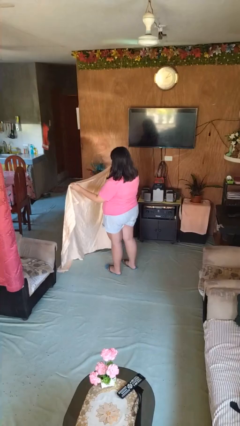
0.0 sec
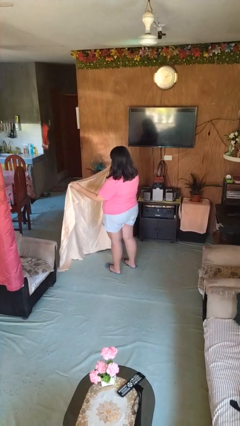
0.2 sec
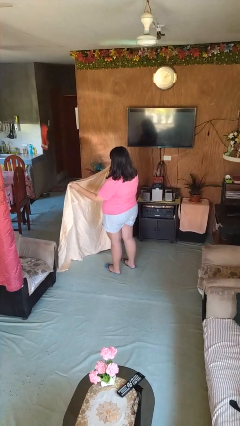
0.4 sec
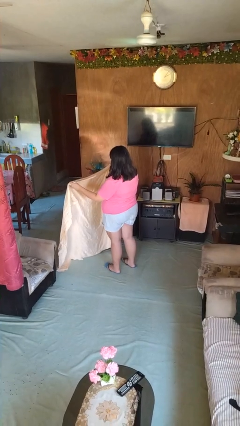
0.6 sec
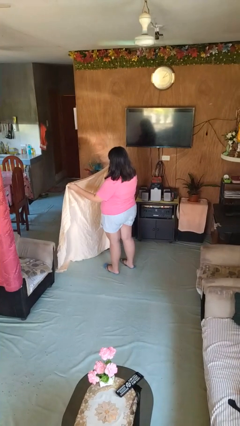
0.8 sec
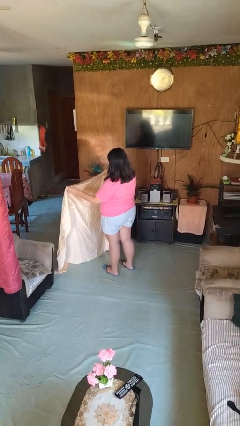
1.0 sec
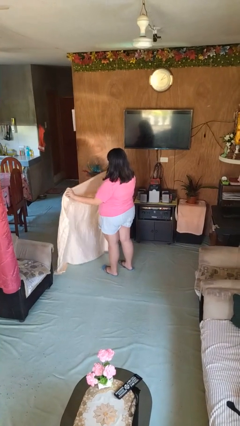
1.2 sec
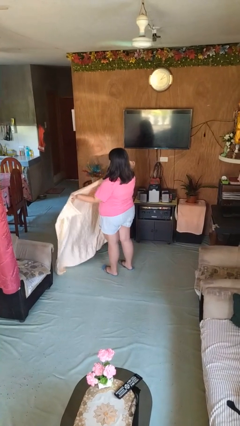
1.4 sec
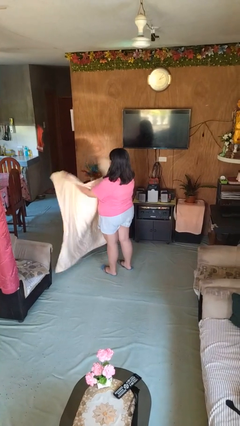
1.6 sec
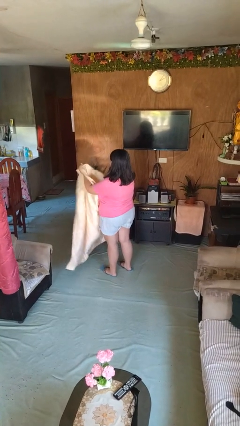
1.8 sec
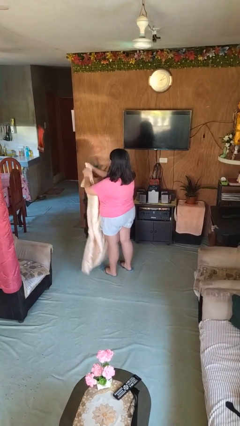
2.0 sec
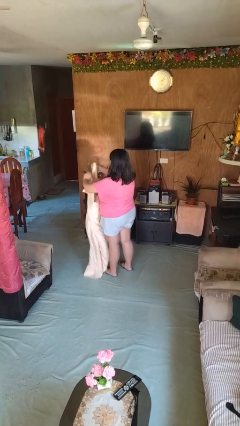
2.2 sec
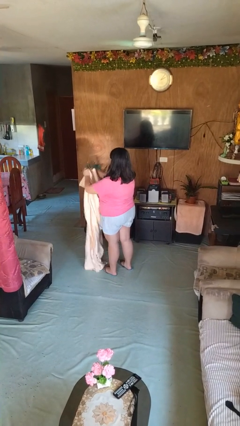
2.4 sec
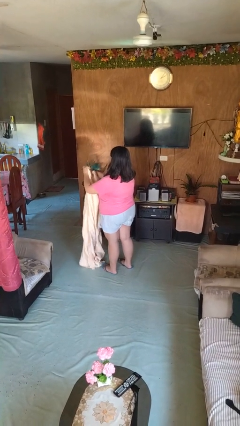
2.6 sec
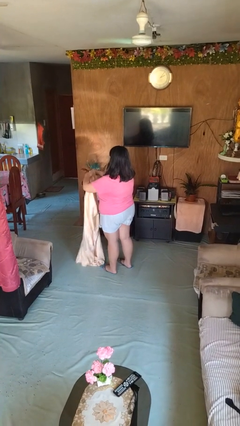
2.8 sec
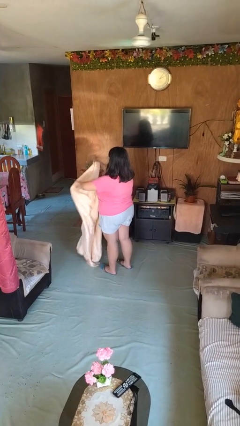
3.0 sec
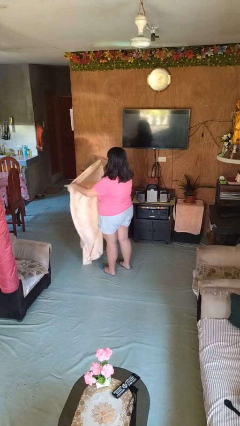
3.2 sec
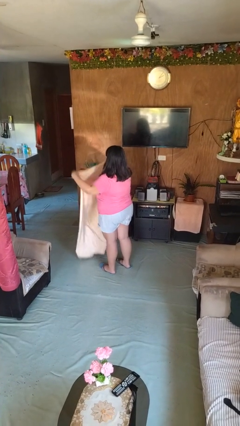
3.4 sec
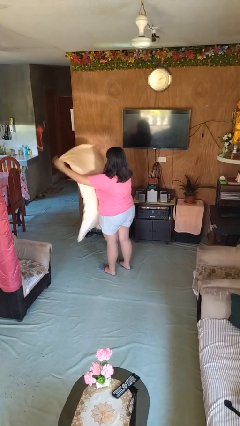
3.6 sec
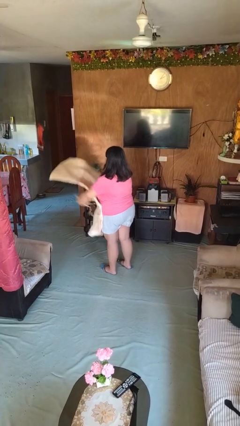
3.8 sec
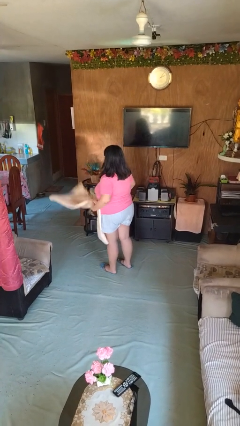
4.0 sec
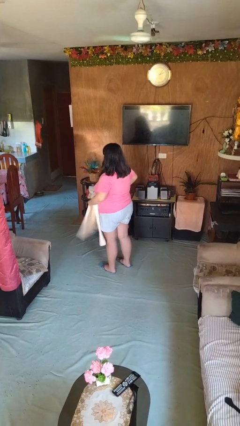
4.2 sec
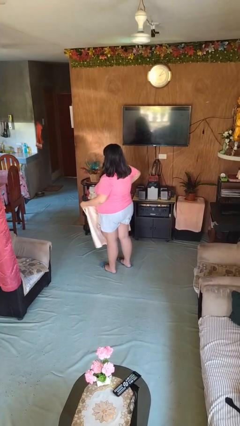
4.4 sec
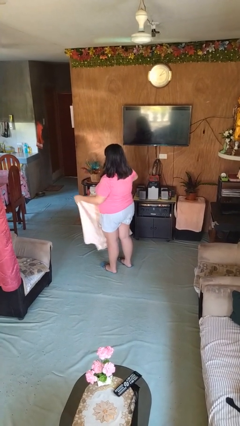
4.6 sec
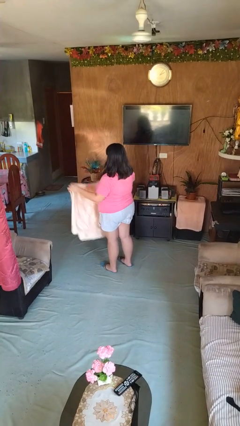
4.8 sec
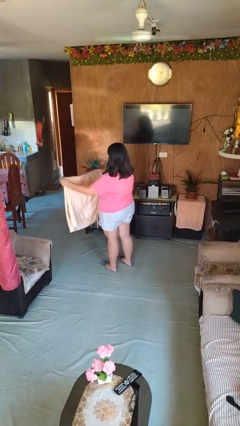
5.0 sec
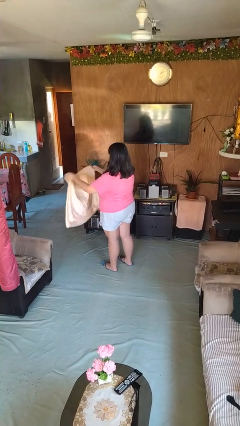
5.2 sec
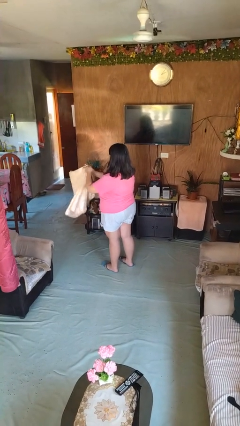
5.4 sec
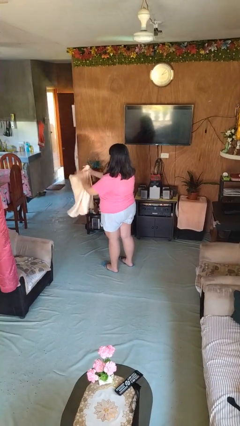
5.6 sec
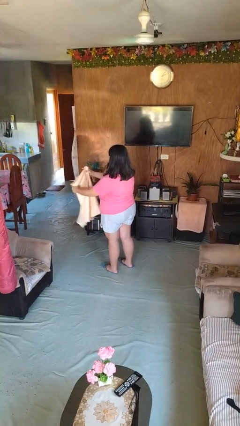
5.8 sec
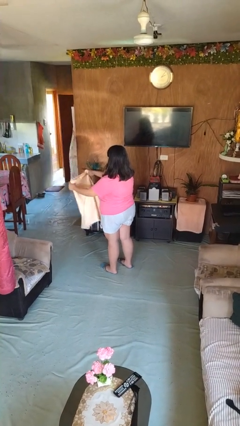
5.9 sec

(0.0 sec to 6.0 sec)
person folds blanket

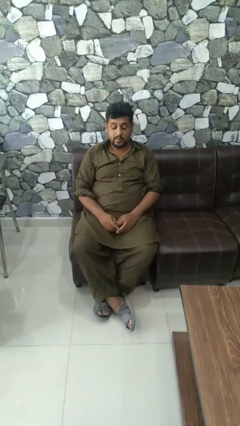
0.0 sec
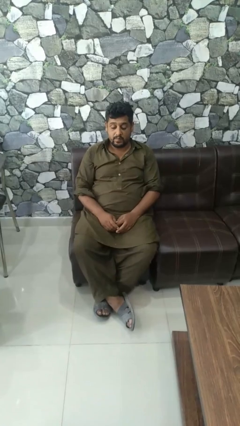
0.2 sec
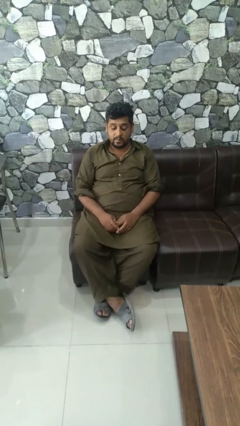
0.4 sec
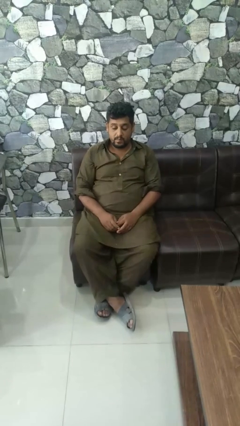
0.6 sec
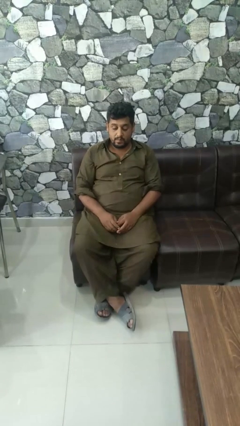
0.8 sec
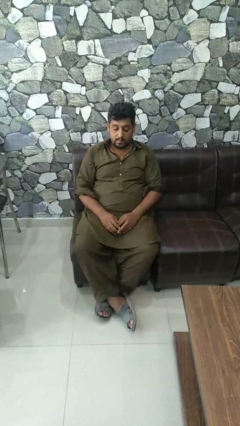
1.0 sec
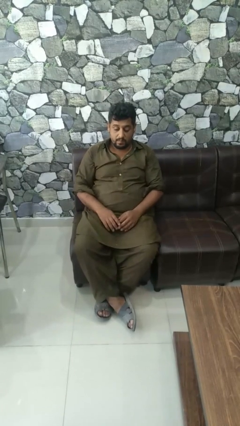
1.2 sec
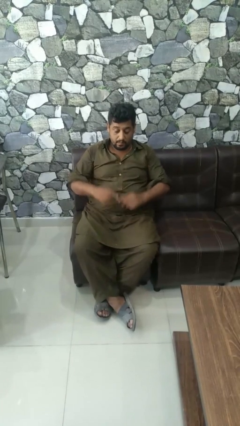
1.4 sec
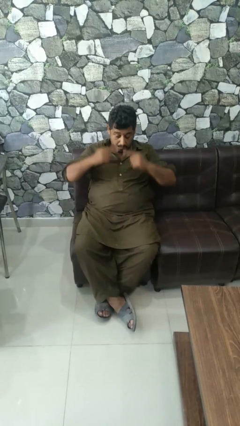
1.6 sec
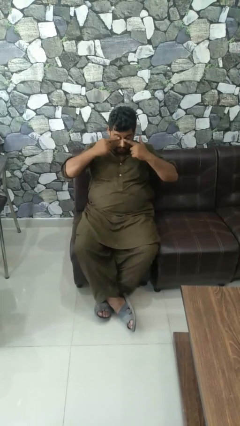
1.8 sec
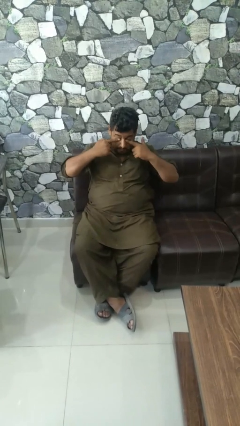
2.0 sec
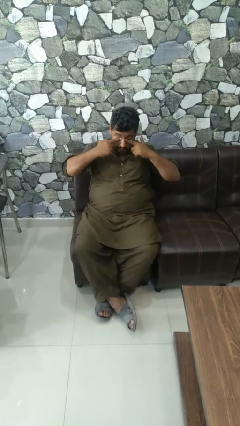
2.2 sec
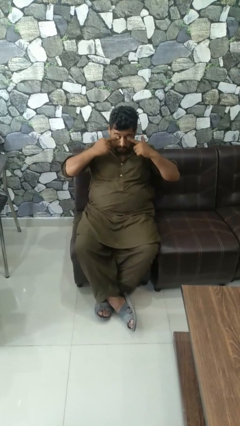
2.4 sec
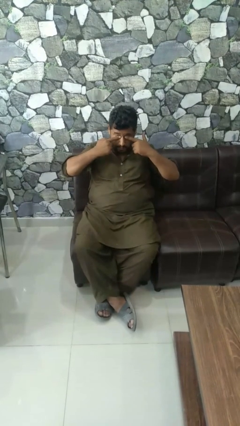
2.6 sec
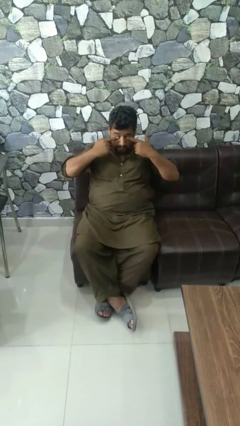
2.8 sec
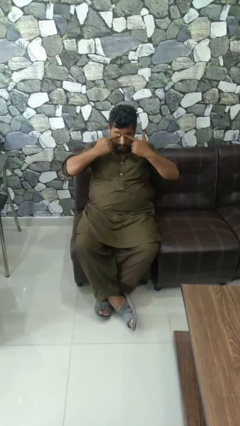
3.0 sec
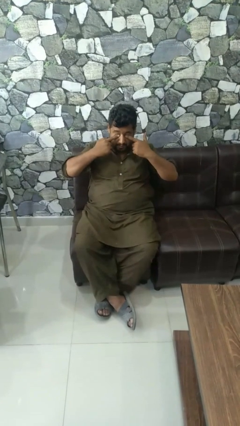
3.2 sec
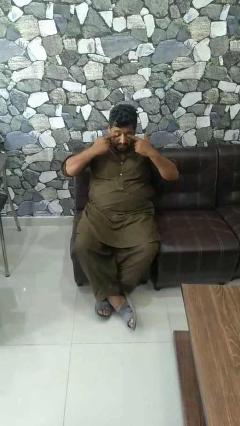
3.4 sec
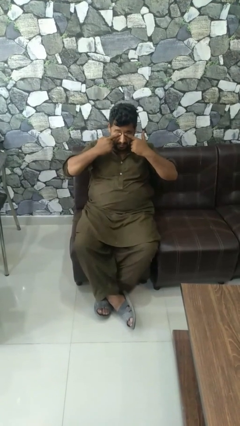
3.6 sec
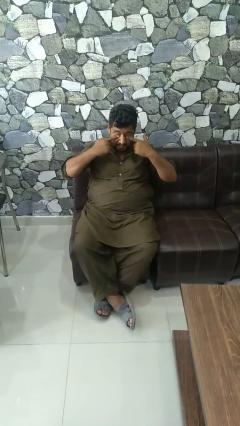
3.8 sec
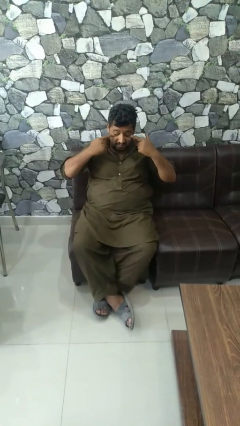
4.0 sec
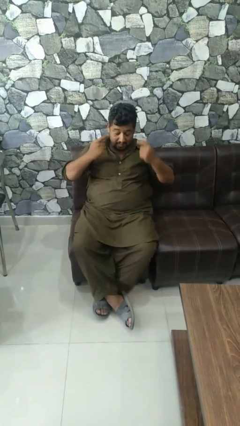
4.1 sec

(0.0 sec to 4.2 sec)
person rubs eyes

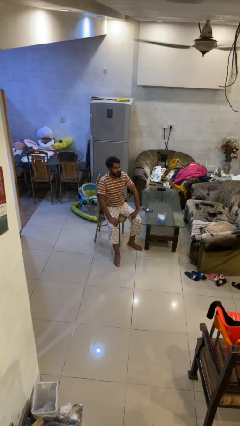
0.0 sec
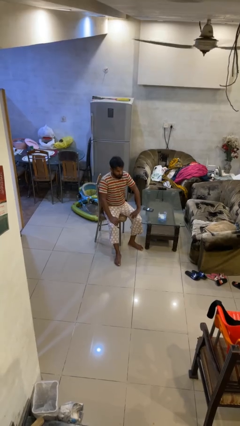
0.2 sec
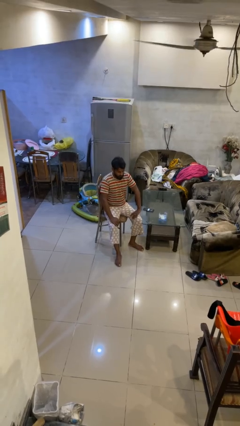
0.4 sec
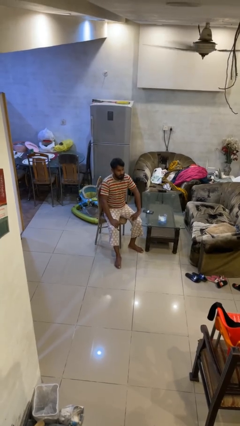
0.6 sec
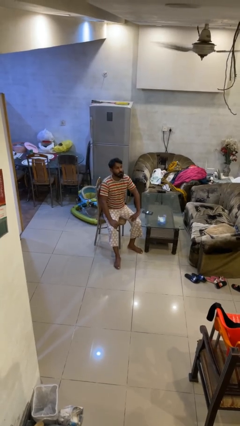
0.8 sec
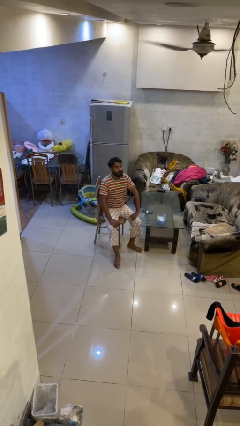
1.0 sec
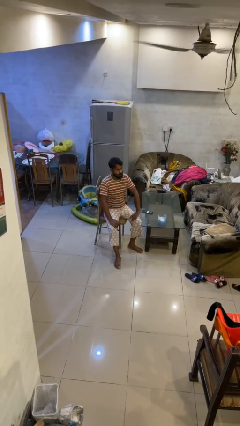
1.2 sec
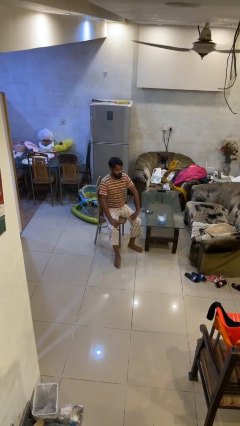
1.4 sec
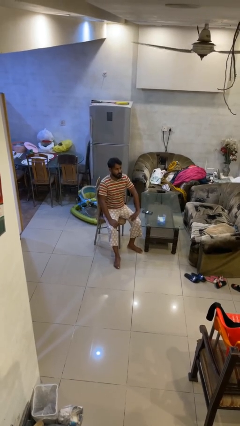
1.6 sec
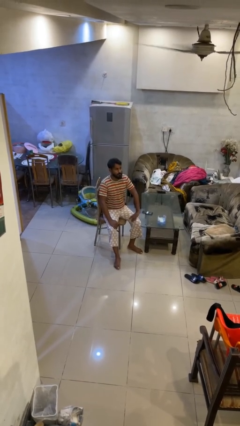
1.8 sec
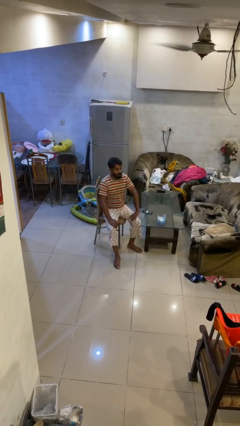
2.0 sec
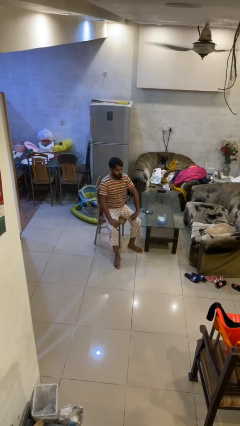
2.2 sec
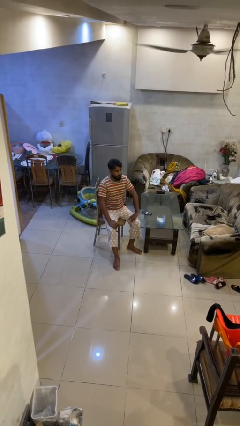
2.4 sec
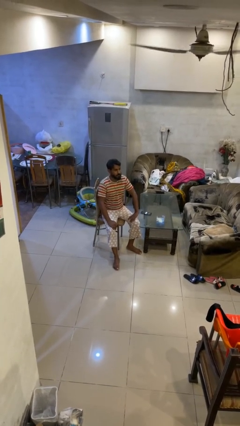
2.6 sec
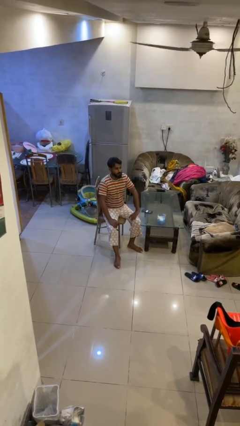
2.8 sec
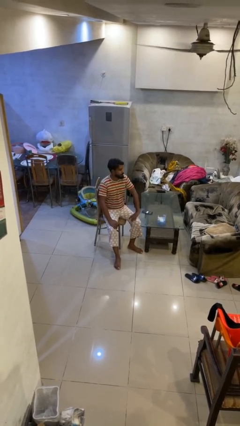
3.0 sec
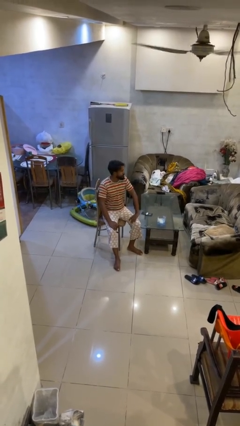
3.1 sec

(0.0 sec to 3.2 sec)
person nods head

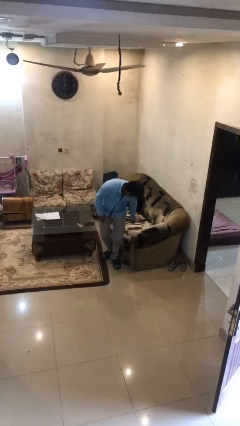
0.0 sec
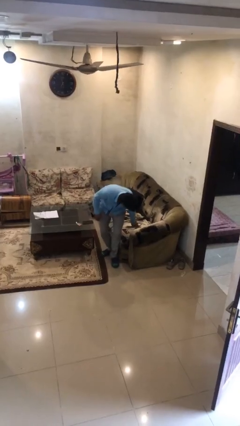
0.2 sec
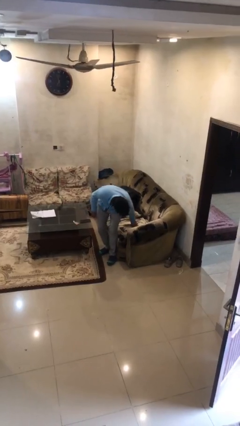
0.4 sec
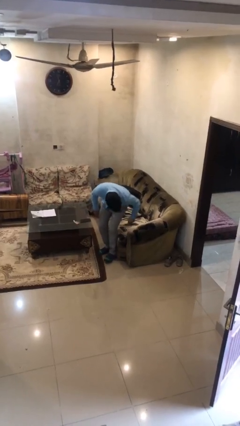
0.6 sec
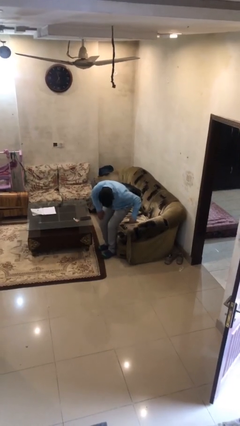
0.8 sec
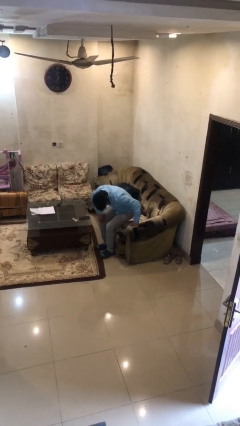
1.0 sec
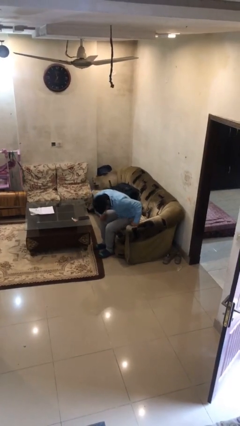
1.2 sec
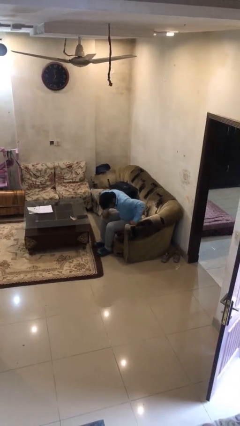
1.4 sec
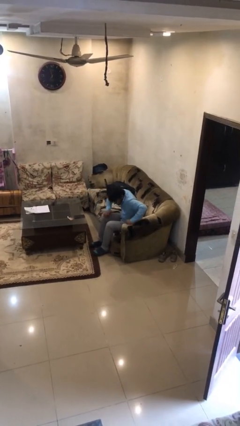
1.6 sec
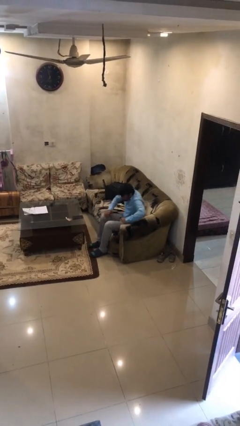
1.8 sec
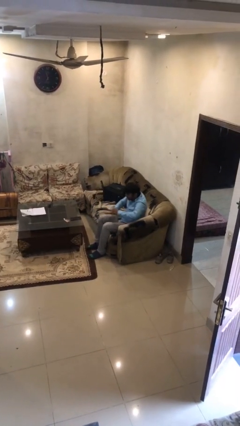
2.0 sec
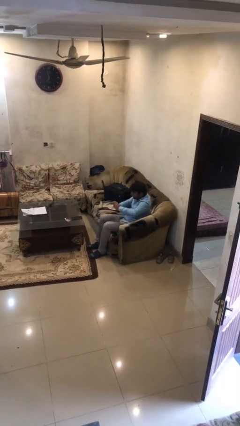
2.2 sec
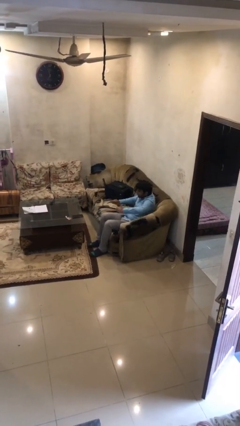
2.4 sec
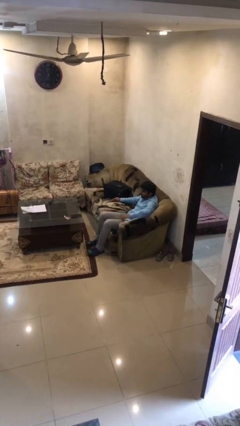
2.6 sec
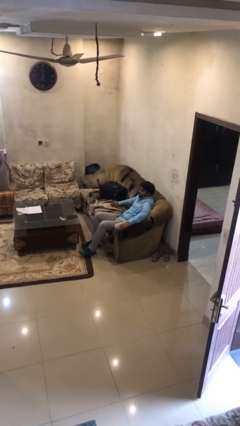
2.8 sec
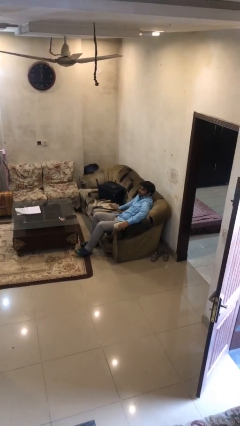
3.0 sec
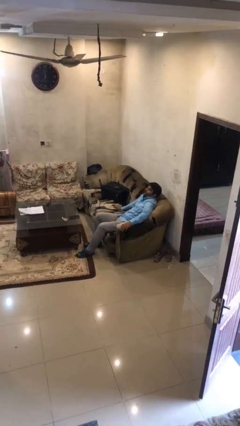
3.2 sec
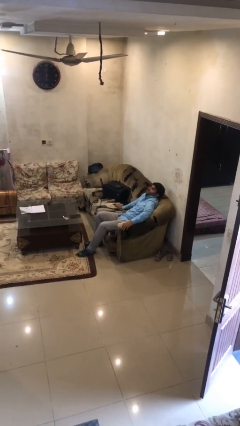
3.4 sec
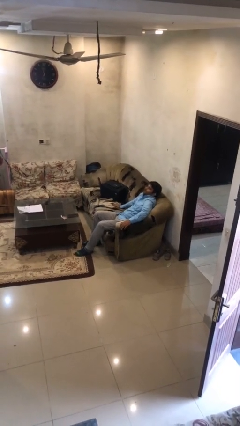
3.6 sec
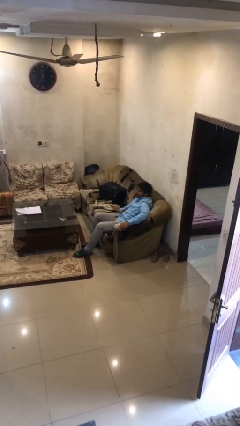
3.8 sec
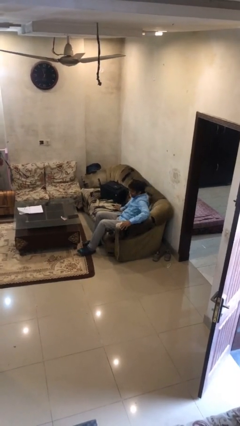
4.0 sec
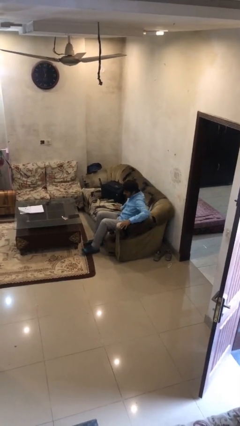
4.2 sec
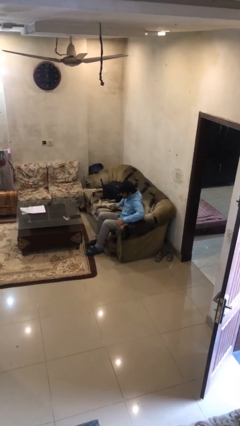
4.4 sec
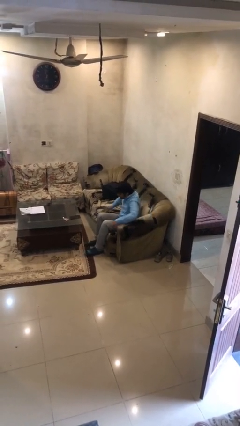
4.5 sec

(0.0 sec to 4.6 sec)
person sits down
